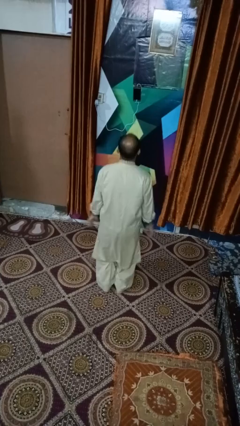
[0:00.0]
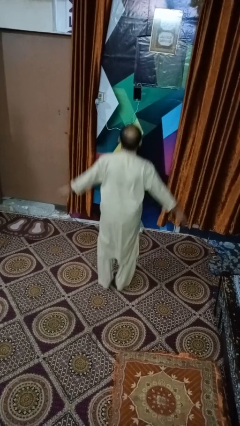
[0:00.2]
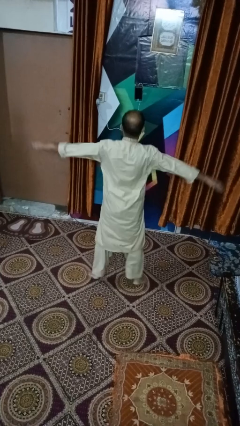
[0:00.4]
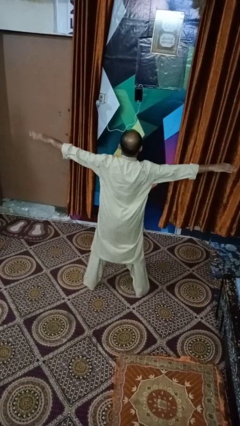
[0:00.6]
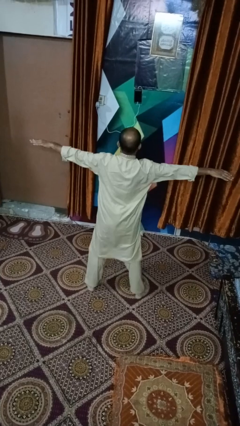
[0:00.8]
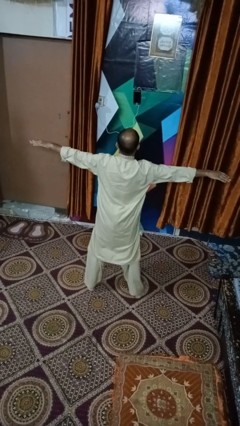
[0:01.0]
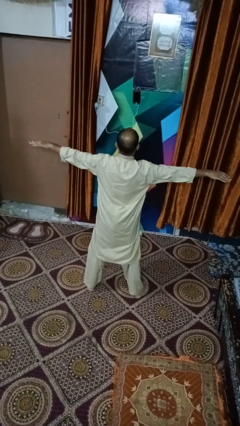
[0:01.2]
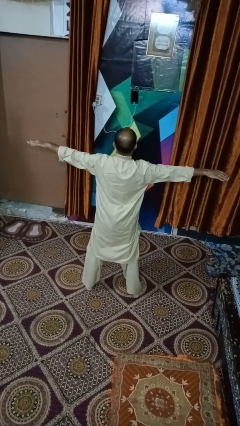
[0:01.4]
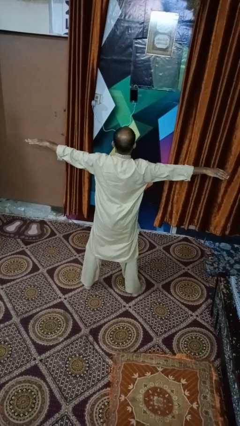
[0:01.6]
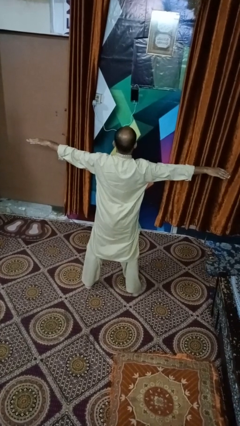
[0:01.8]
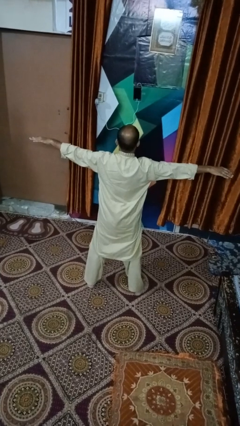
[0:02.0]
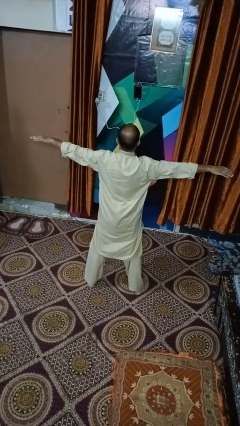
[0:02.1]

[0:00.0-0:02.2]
person exercises with jumping jacks

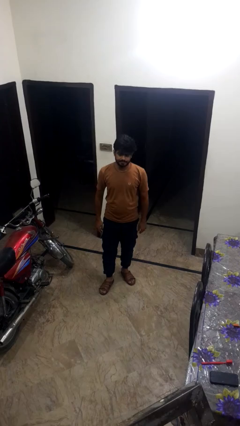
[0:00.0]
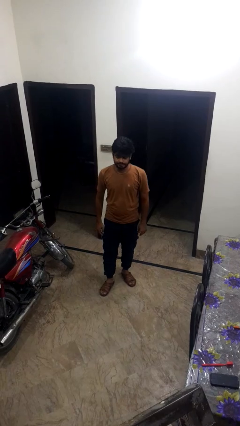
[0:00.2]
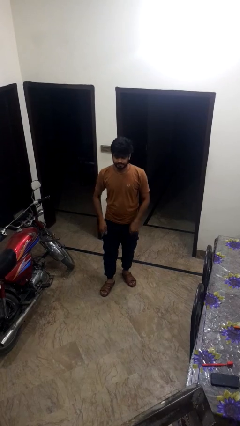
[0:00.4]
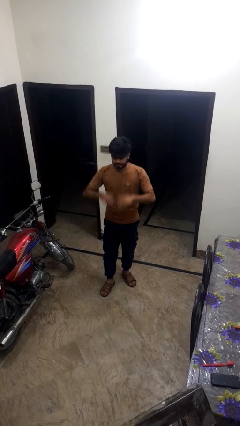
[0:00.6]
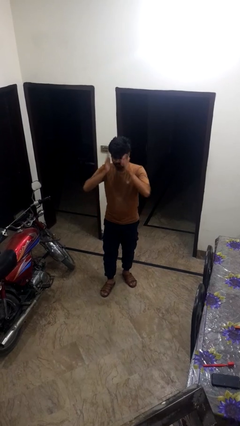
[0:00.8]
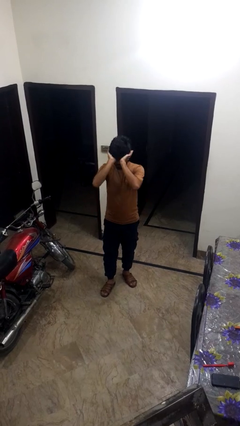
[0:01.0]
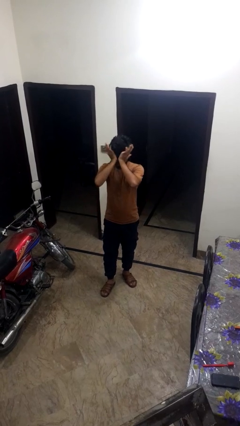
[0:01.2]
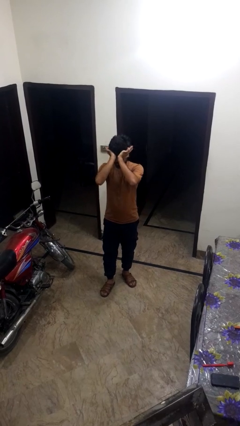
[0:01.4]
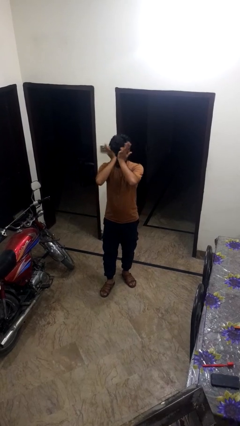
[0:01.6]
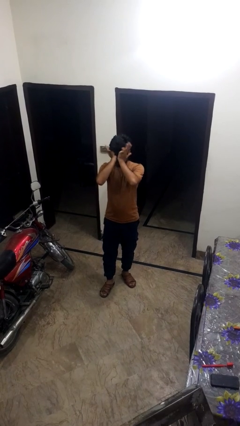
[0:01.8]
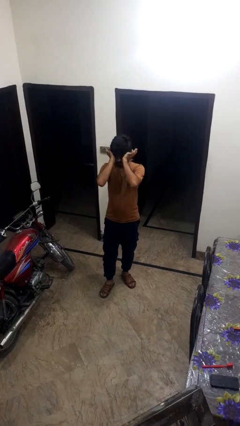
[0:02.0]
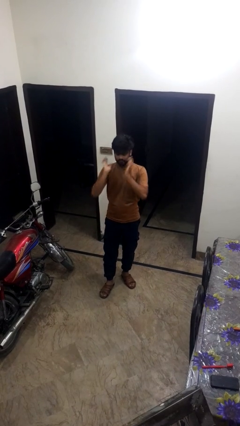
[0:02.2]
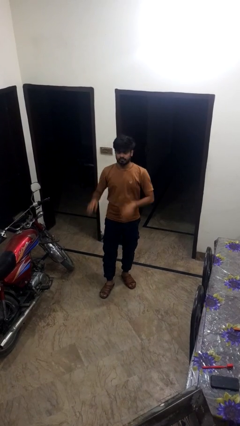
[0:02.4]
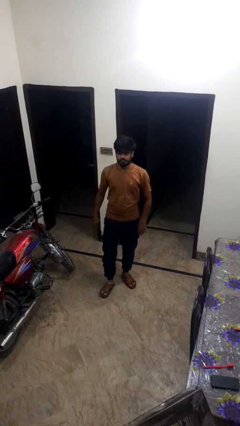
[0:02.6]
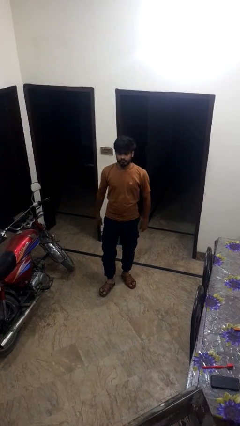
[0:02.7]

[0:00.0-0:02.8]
person rubs eyes

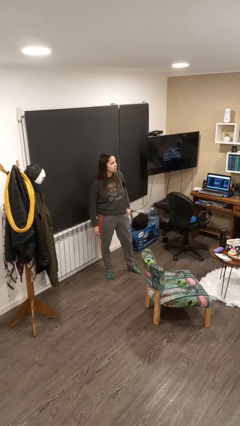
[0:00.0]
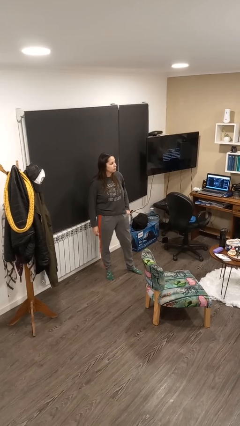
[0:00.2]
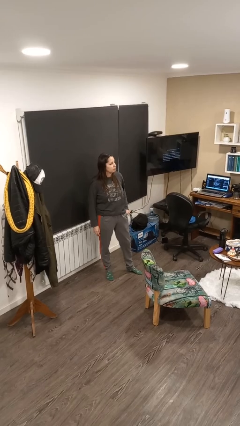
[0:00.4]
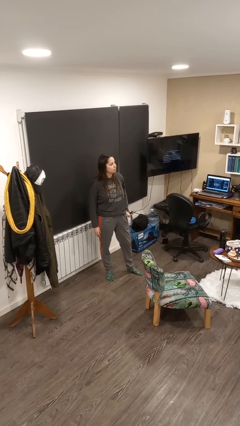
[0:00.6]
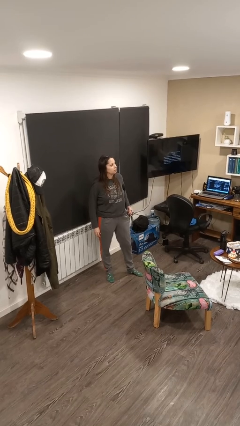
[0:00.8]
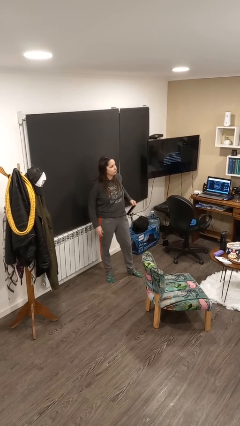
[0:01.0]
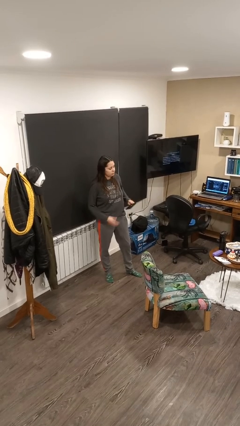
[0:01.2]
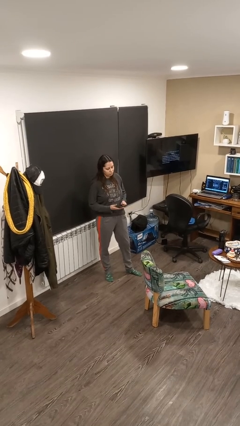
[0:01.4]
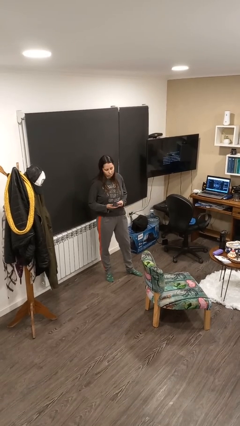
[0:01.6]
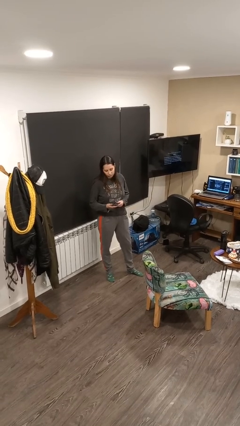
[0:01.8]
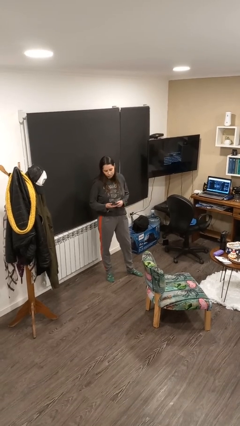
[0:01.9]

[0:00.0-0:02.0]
person takes phone from pocket

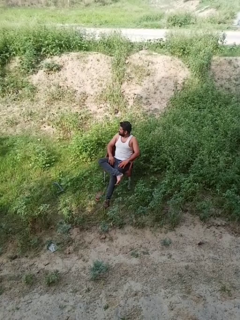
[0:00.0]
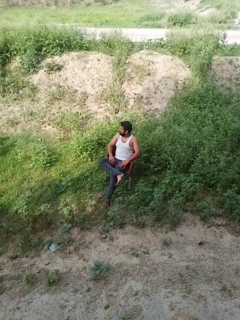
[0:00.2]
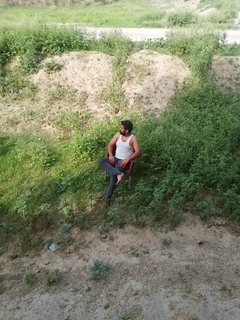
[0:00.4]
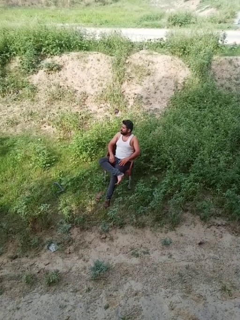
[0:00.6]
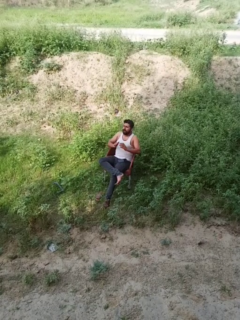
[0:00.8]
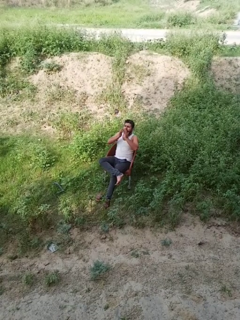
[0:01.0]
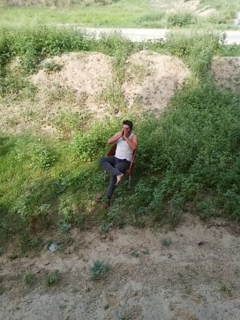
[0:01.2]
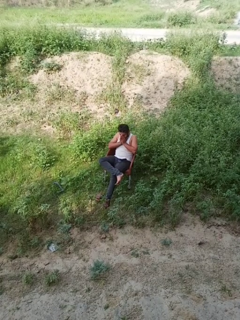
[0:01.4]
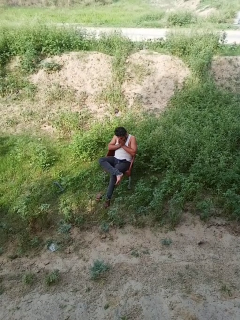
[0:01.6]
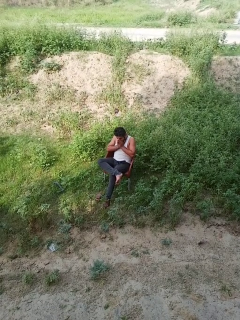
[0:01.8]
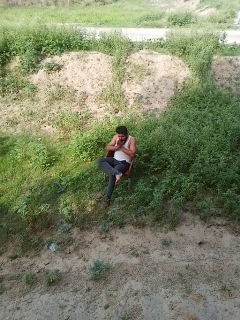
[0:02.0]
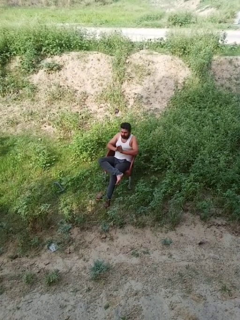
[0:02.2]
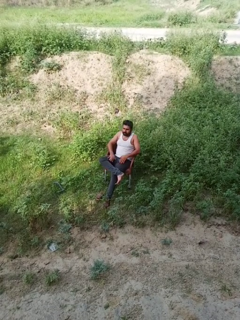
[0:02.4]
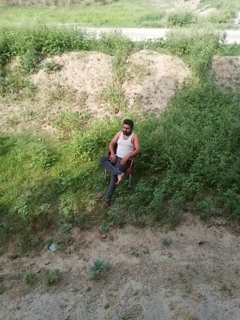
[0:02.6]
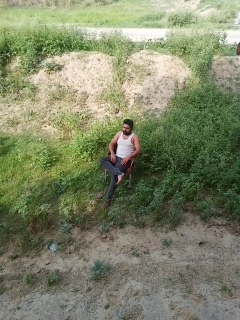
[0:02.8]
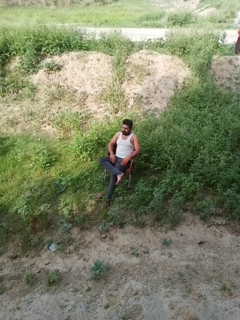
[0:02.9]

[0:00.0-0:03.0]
person sneezes into hand

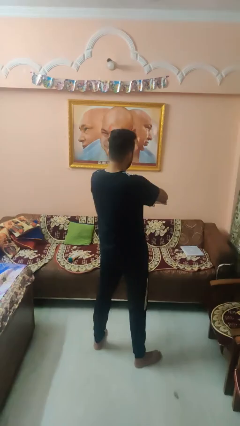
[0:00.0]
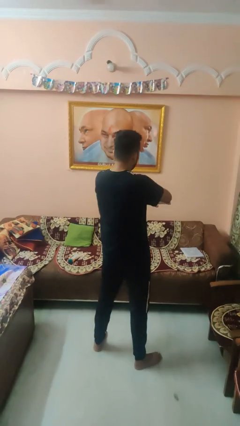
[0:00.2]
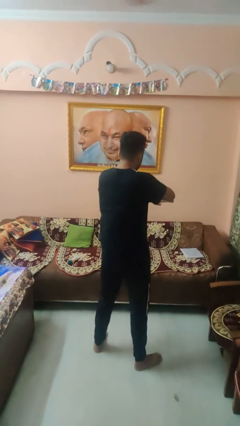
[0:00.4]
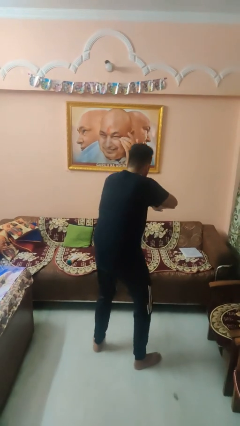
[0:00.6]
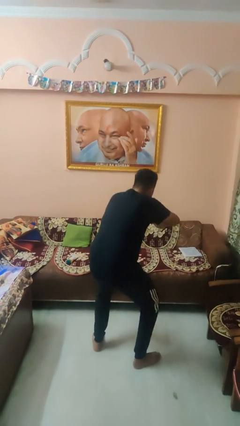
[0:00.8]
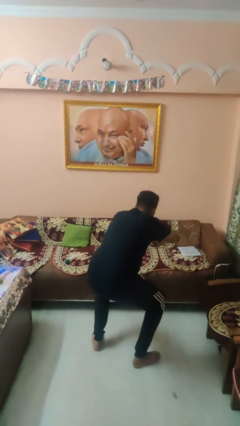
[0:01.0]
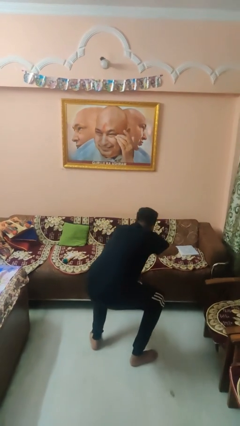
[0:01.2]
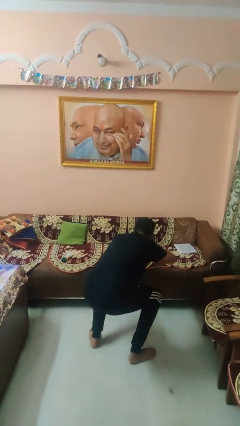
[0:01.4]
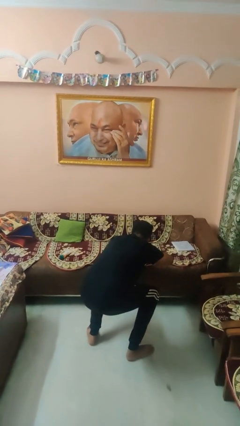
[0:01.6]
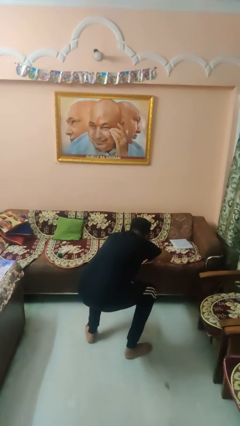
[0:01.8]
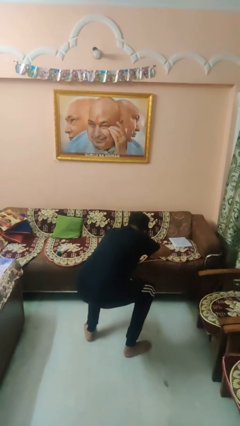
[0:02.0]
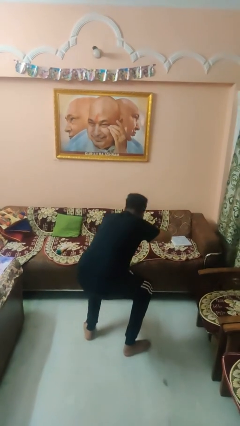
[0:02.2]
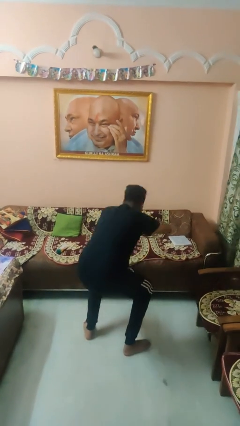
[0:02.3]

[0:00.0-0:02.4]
person exercises with situp

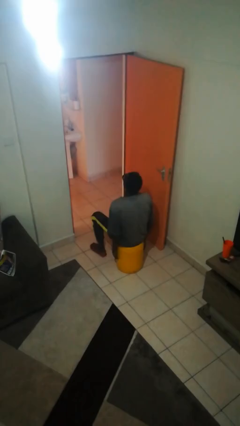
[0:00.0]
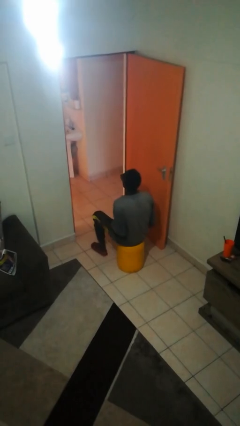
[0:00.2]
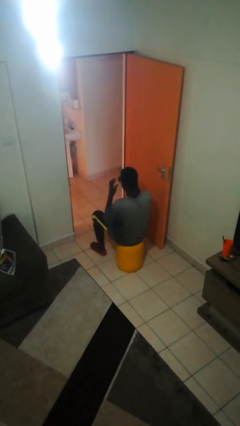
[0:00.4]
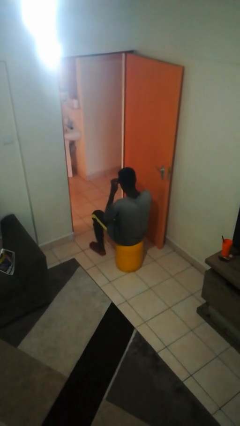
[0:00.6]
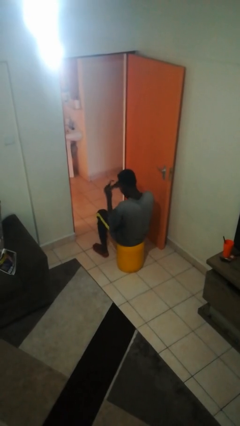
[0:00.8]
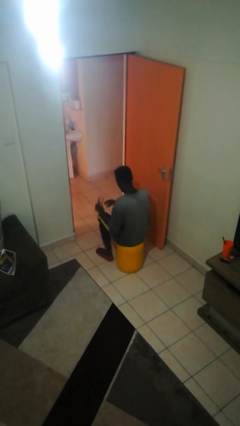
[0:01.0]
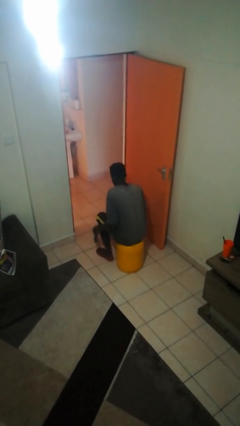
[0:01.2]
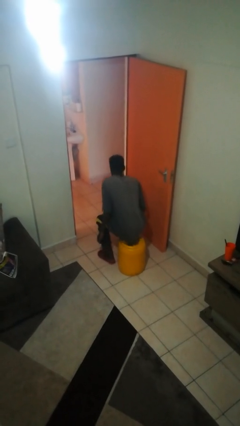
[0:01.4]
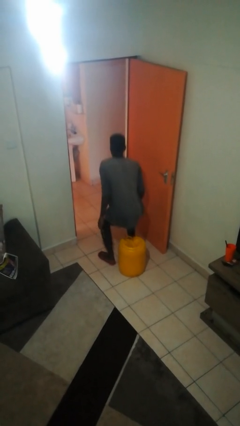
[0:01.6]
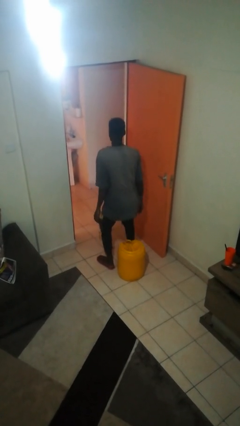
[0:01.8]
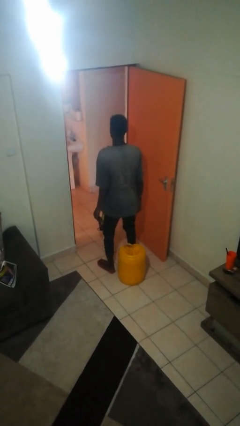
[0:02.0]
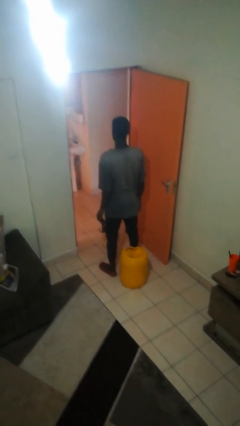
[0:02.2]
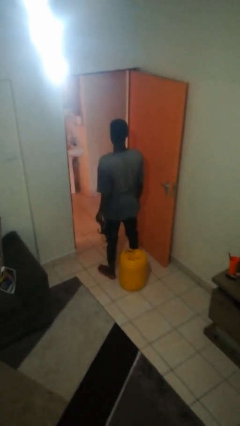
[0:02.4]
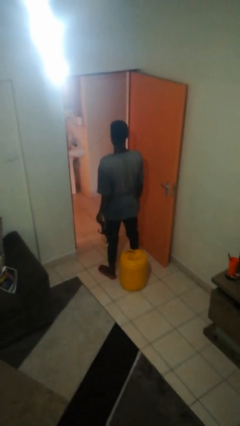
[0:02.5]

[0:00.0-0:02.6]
person takes off sunglasses

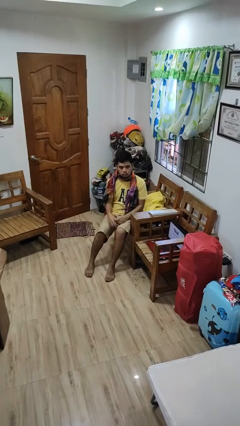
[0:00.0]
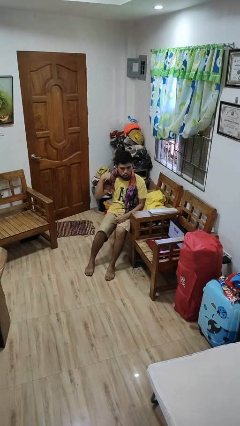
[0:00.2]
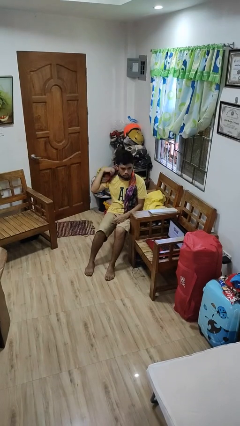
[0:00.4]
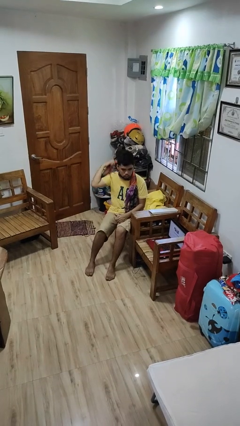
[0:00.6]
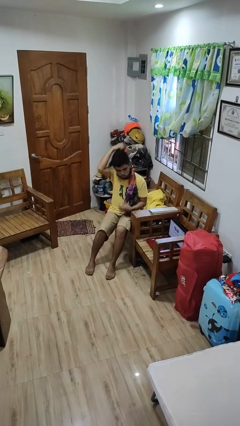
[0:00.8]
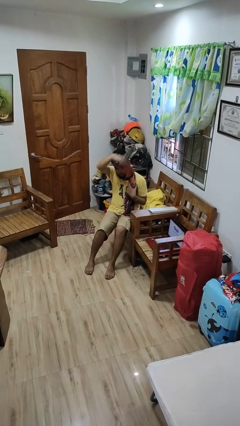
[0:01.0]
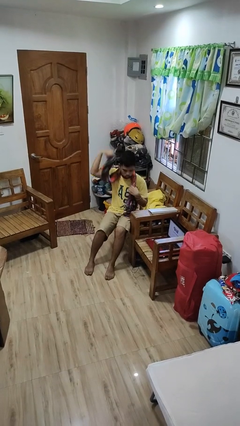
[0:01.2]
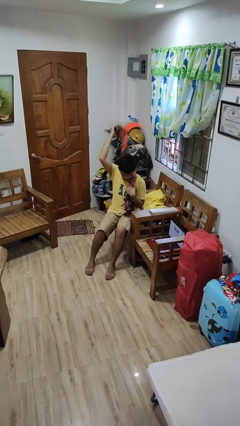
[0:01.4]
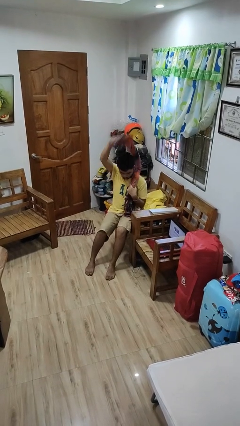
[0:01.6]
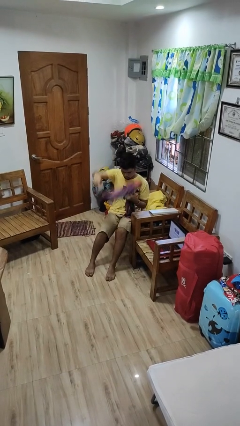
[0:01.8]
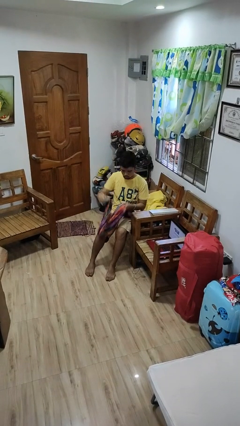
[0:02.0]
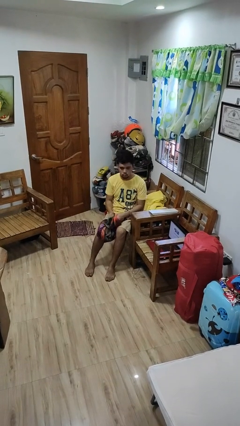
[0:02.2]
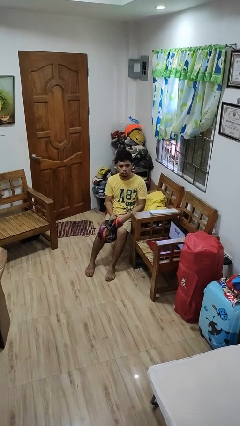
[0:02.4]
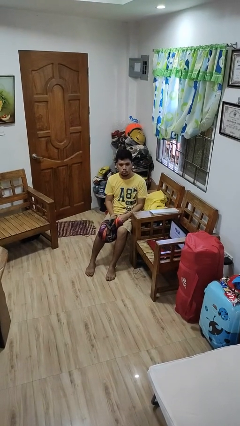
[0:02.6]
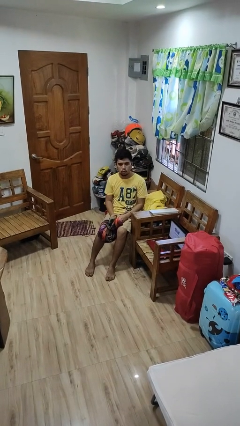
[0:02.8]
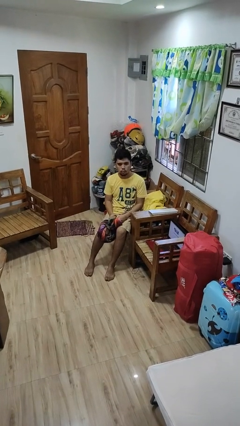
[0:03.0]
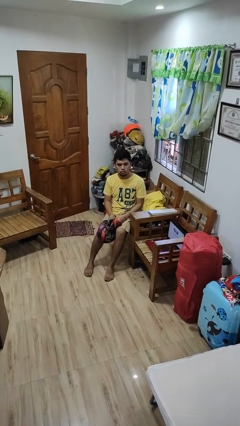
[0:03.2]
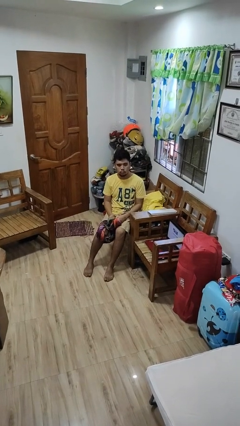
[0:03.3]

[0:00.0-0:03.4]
person takes off scarf
